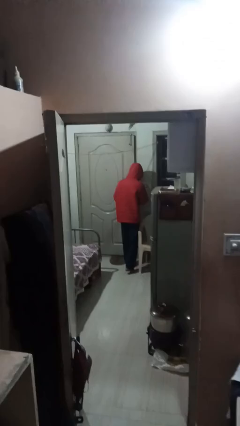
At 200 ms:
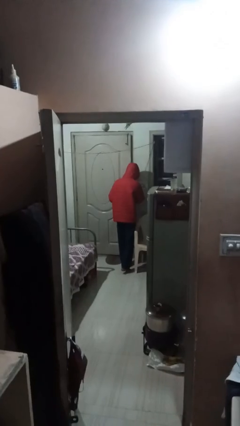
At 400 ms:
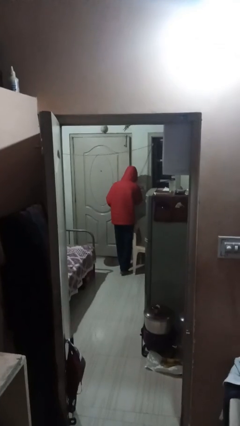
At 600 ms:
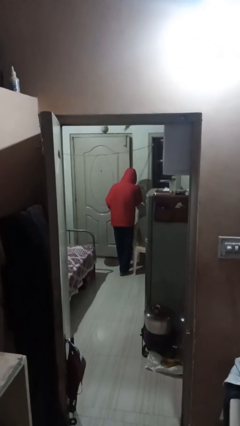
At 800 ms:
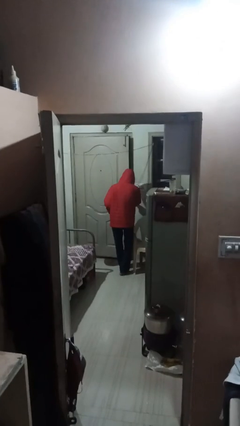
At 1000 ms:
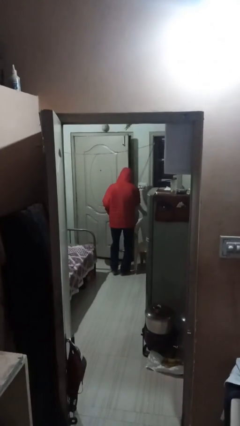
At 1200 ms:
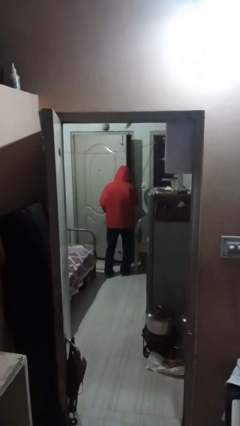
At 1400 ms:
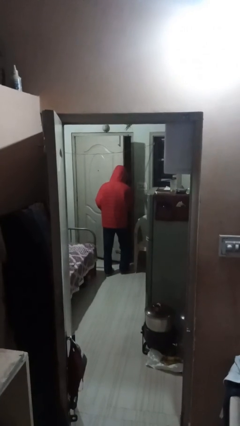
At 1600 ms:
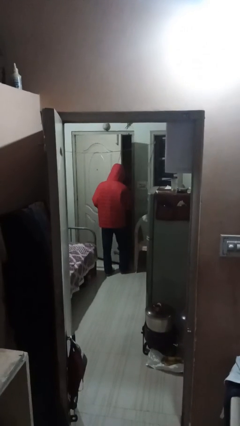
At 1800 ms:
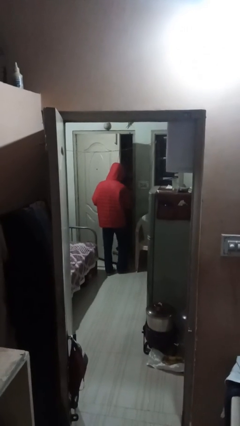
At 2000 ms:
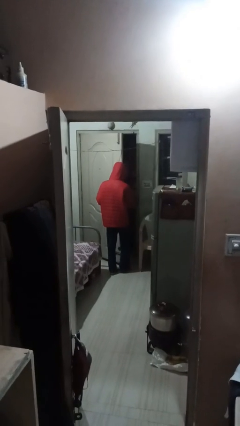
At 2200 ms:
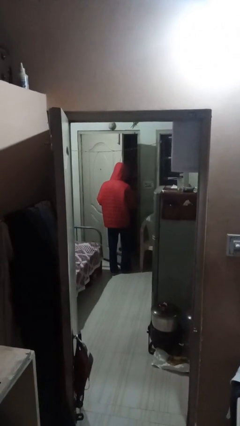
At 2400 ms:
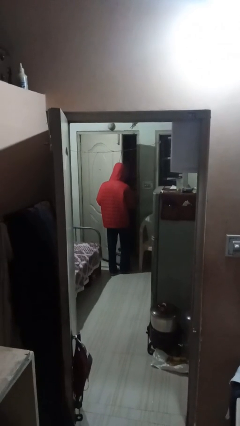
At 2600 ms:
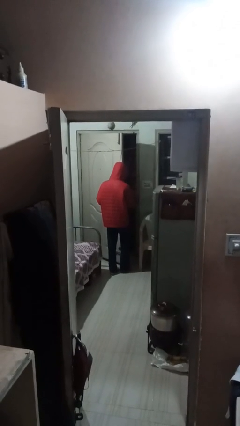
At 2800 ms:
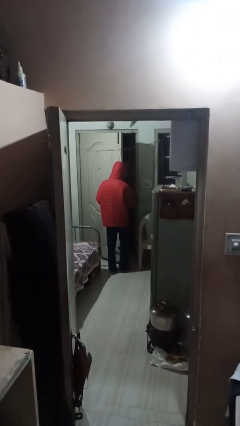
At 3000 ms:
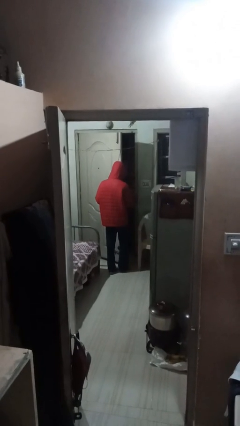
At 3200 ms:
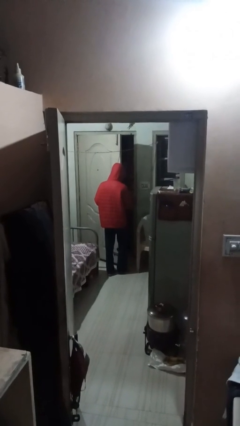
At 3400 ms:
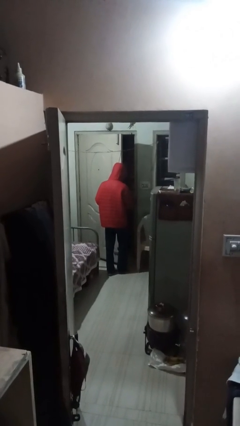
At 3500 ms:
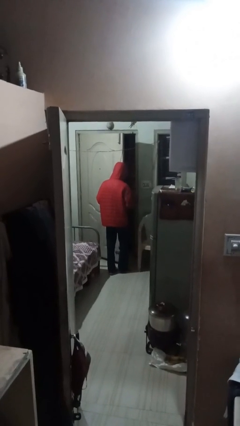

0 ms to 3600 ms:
person opens facility door

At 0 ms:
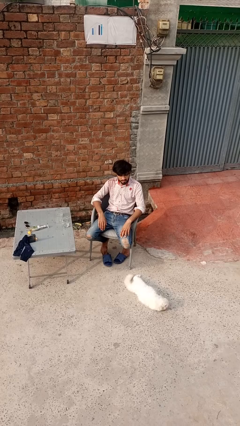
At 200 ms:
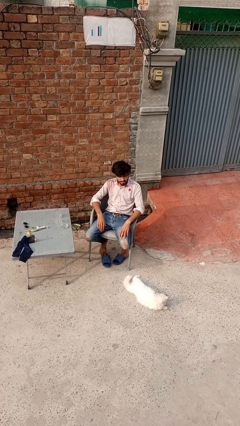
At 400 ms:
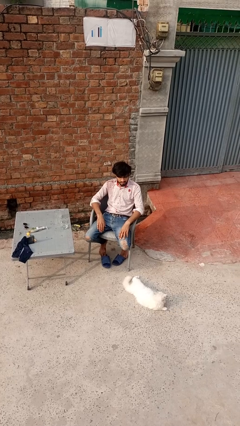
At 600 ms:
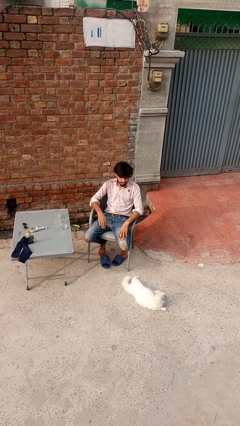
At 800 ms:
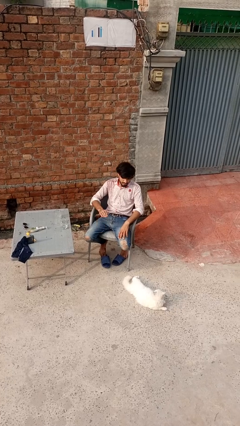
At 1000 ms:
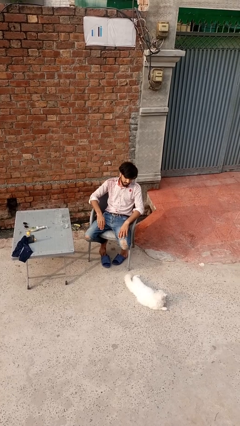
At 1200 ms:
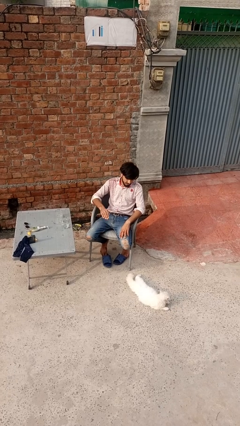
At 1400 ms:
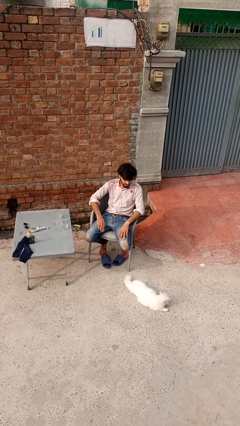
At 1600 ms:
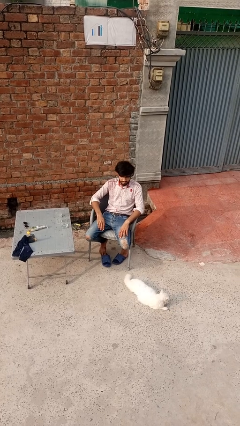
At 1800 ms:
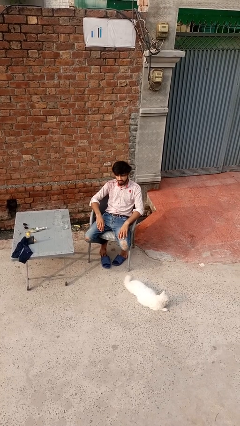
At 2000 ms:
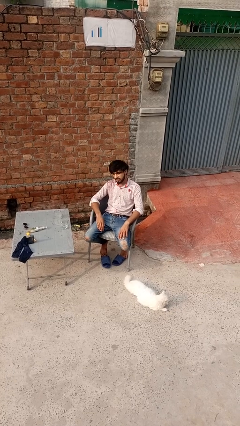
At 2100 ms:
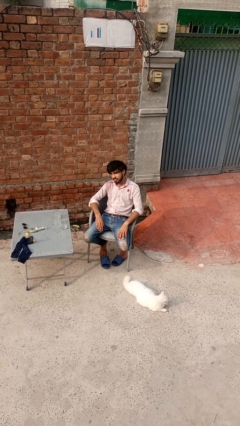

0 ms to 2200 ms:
person slaps hands on thighs

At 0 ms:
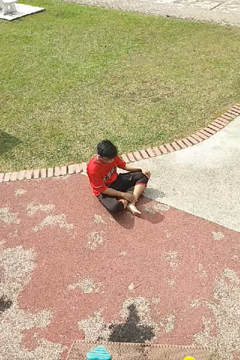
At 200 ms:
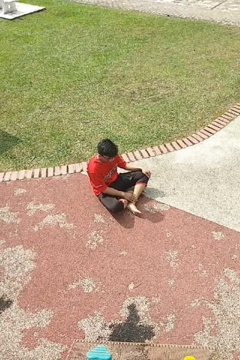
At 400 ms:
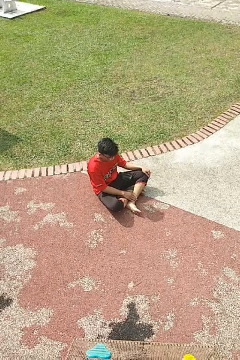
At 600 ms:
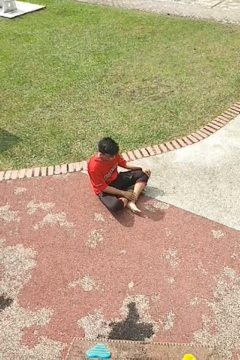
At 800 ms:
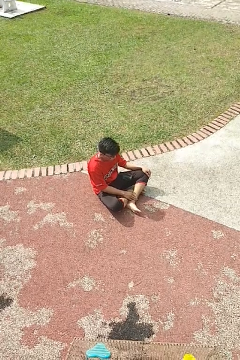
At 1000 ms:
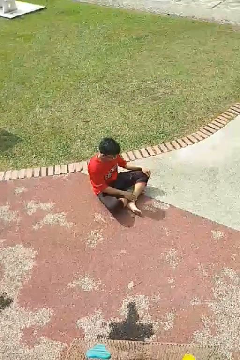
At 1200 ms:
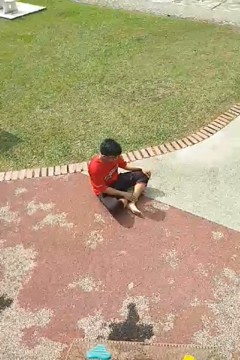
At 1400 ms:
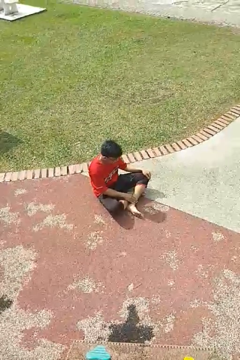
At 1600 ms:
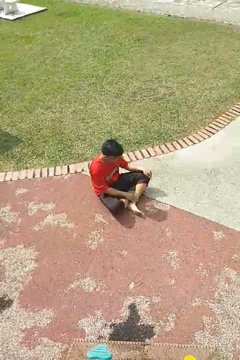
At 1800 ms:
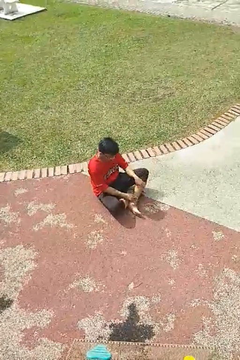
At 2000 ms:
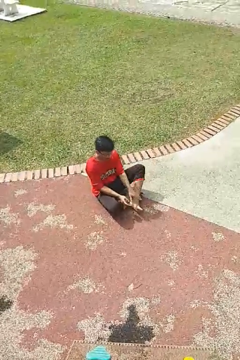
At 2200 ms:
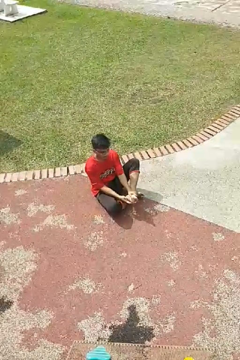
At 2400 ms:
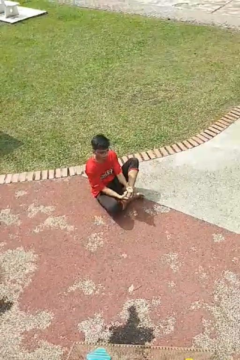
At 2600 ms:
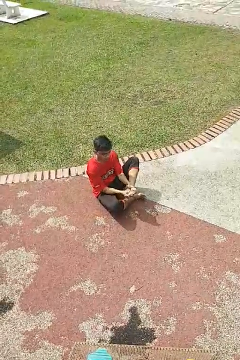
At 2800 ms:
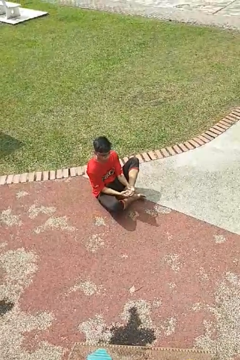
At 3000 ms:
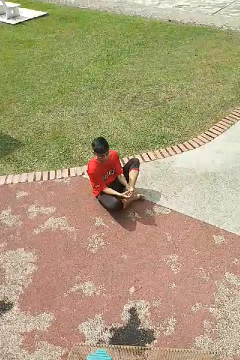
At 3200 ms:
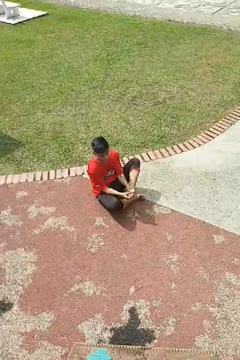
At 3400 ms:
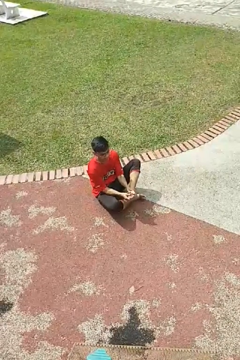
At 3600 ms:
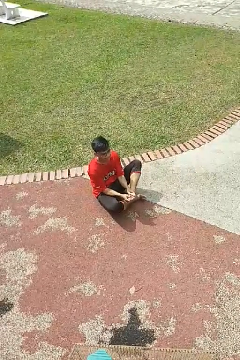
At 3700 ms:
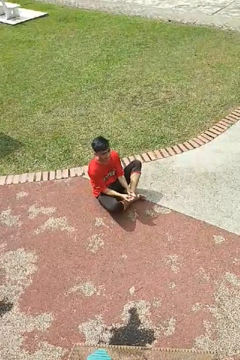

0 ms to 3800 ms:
person rubs foot

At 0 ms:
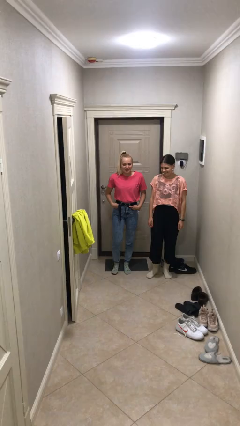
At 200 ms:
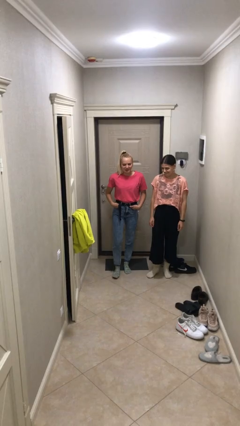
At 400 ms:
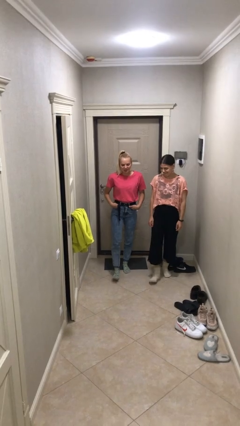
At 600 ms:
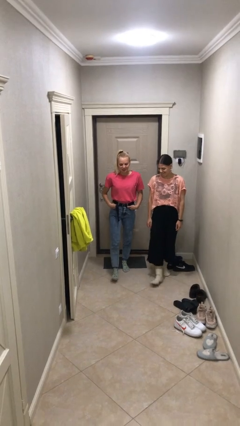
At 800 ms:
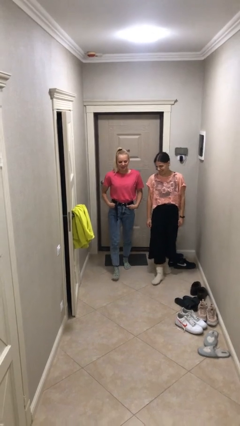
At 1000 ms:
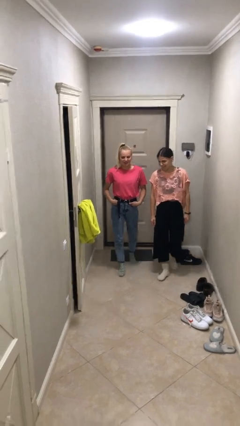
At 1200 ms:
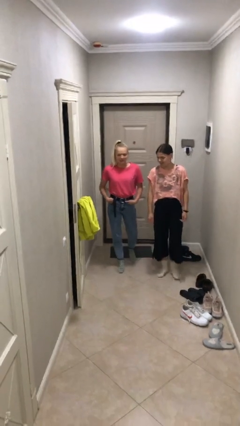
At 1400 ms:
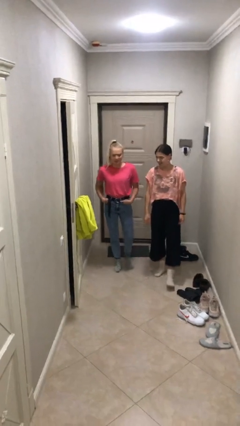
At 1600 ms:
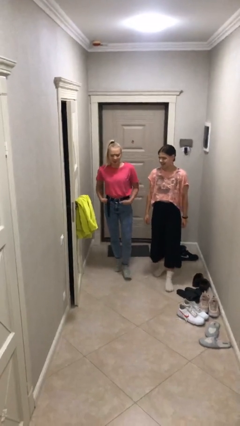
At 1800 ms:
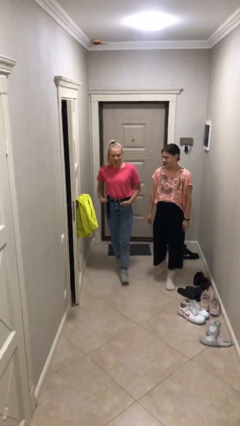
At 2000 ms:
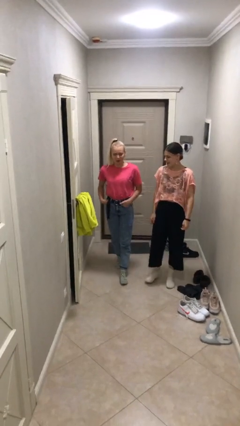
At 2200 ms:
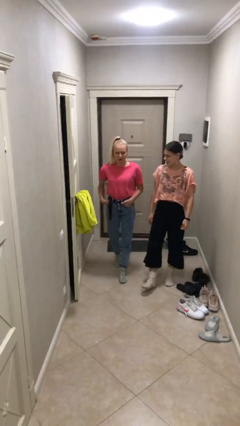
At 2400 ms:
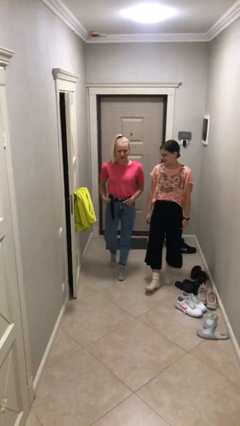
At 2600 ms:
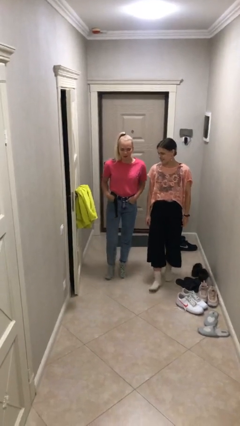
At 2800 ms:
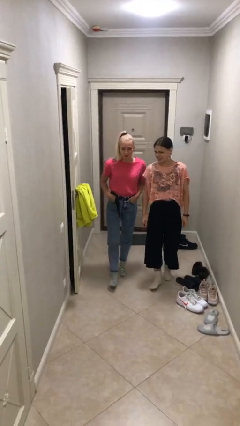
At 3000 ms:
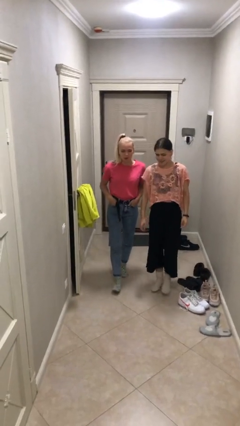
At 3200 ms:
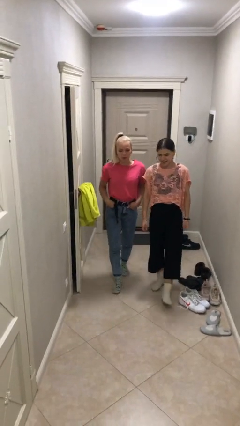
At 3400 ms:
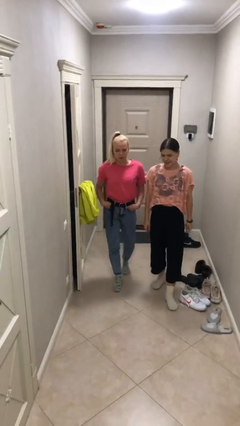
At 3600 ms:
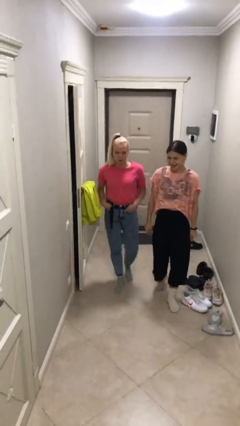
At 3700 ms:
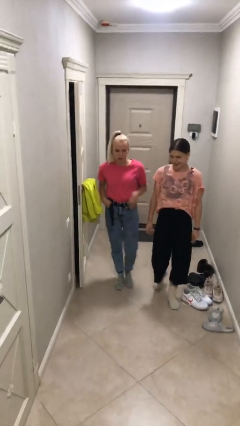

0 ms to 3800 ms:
person talks to person

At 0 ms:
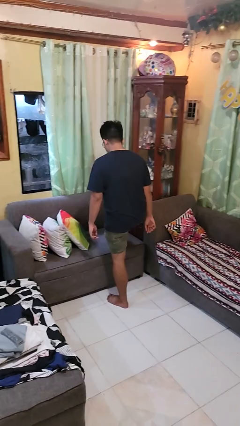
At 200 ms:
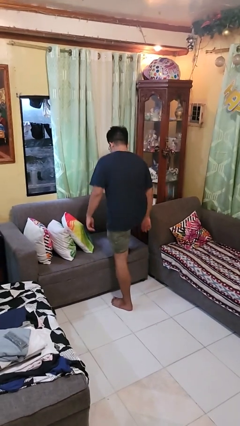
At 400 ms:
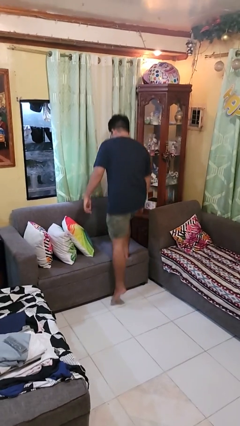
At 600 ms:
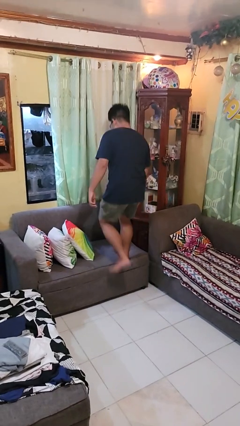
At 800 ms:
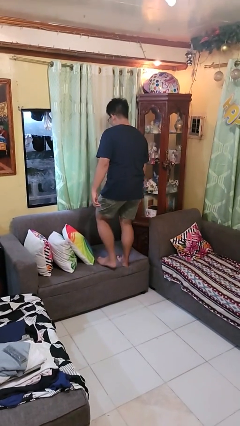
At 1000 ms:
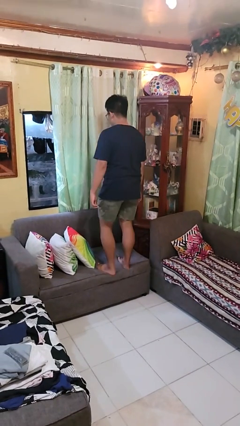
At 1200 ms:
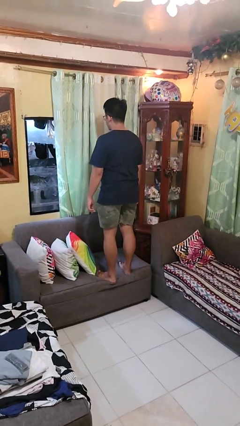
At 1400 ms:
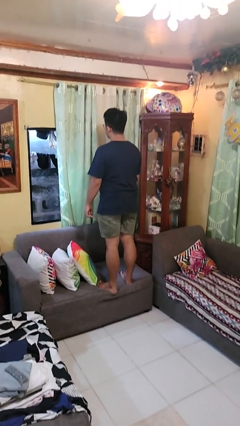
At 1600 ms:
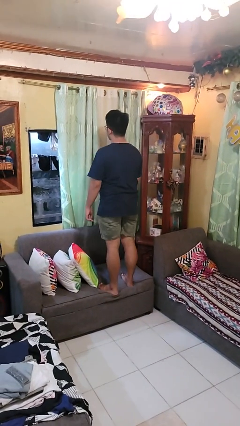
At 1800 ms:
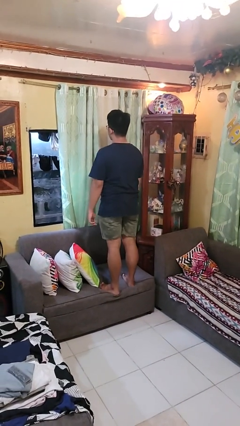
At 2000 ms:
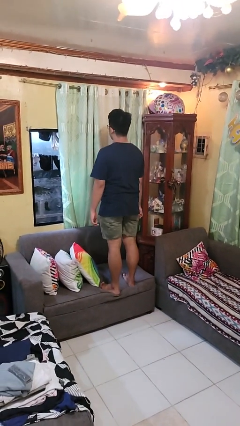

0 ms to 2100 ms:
person climbs on couch

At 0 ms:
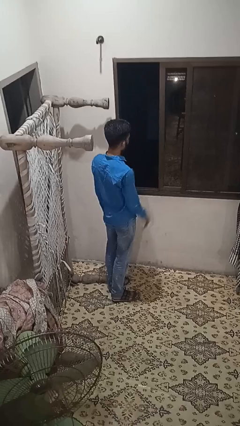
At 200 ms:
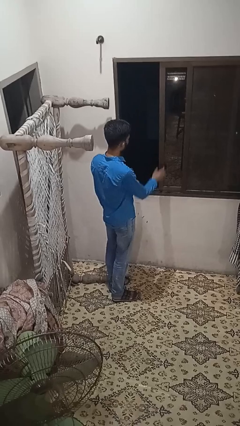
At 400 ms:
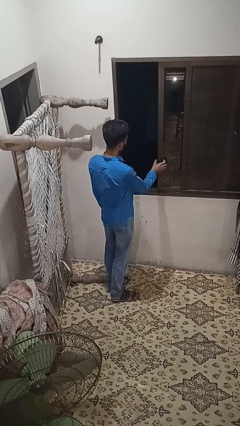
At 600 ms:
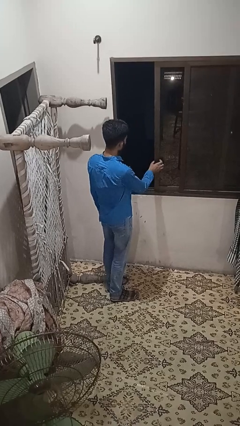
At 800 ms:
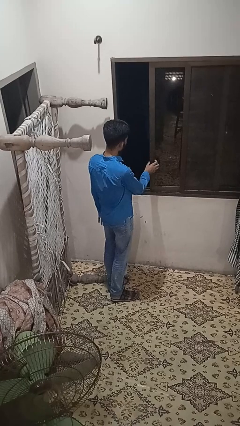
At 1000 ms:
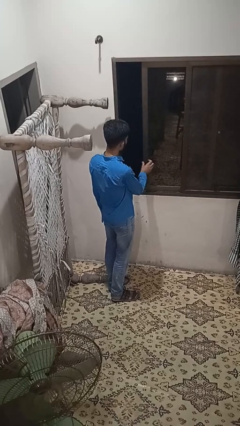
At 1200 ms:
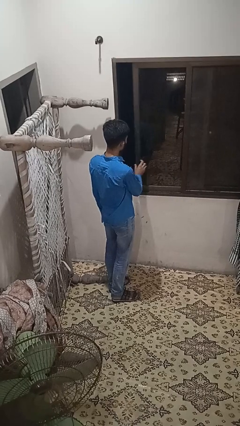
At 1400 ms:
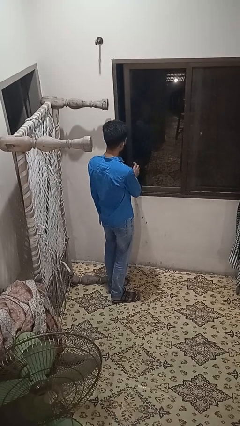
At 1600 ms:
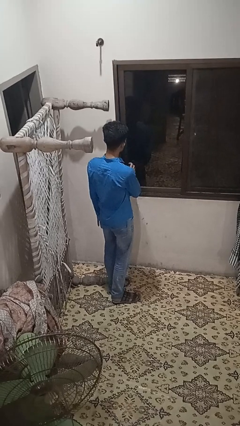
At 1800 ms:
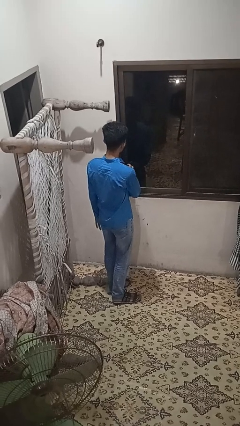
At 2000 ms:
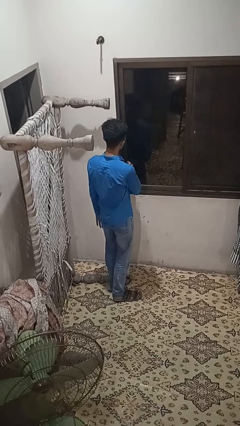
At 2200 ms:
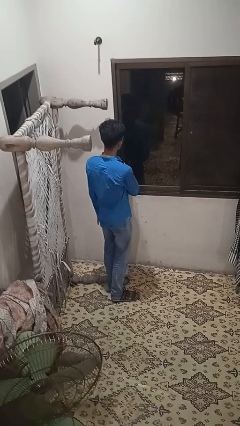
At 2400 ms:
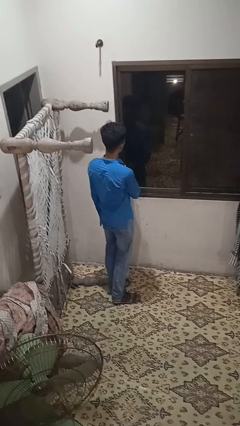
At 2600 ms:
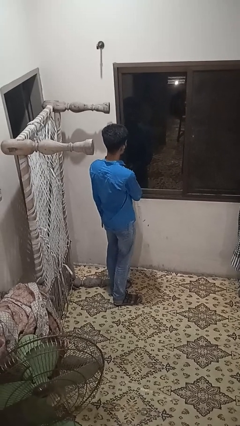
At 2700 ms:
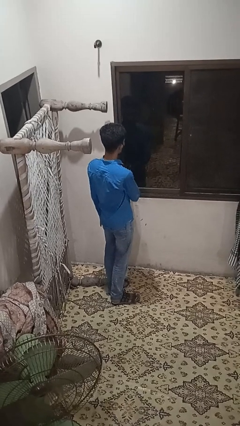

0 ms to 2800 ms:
person closes home window

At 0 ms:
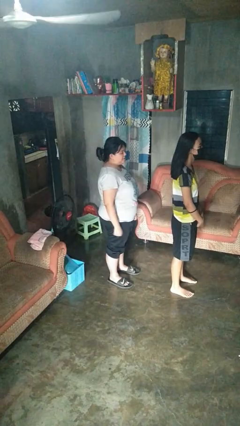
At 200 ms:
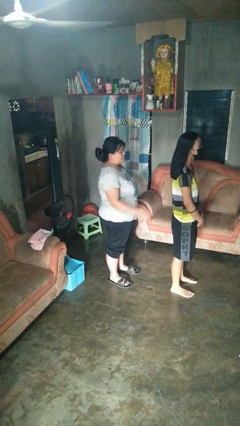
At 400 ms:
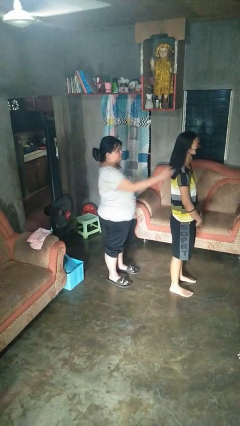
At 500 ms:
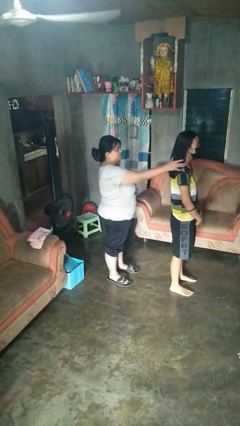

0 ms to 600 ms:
person grabs person by hair
